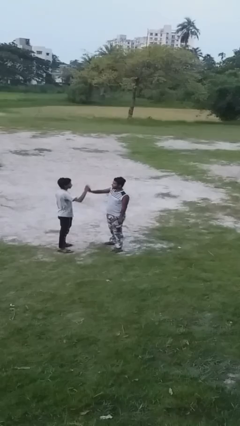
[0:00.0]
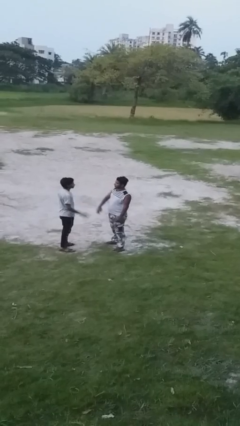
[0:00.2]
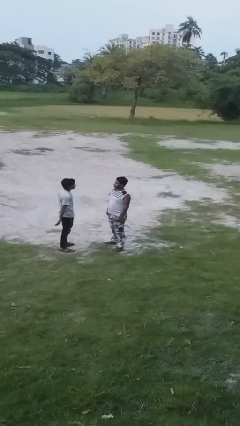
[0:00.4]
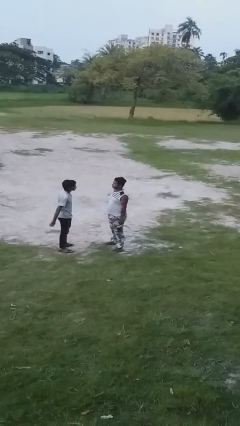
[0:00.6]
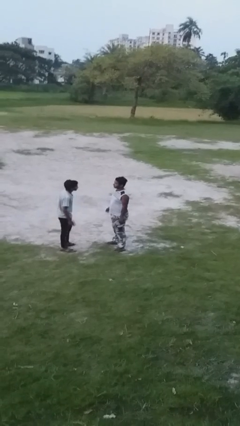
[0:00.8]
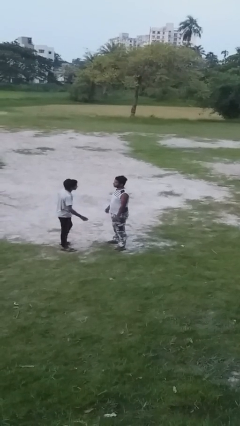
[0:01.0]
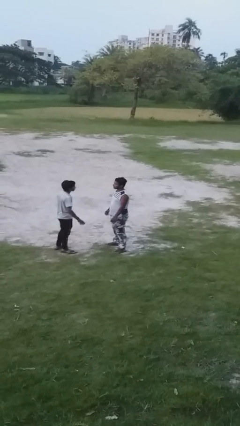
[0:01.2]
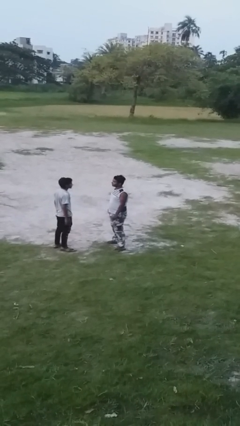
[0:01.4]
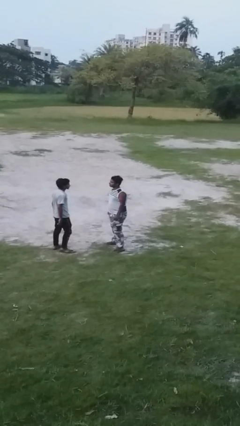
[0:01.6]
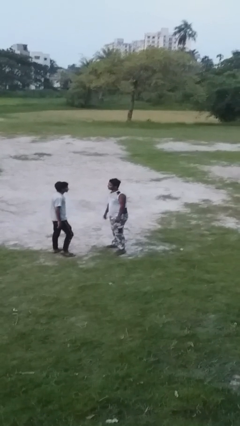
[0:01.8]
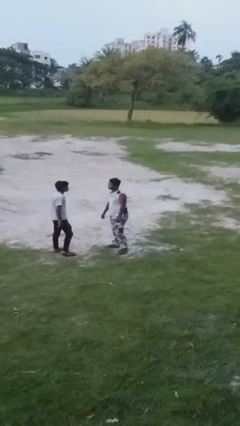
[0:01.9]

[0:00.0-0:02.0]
person highfives hand

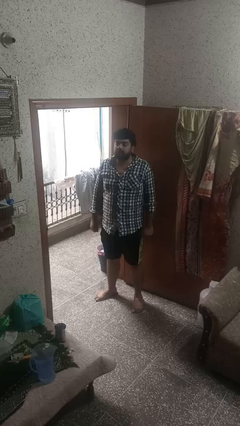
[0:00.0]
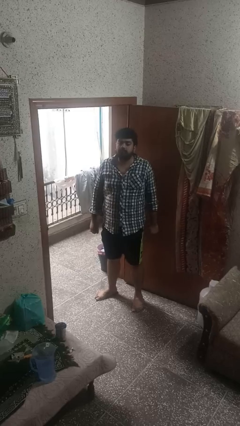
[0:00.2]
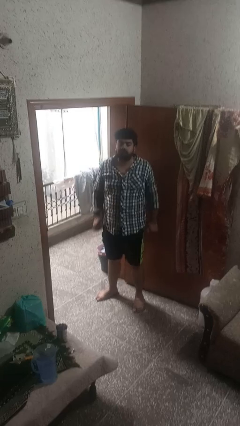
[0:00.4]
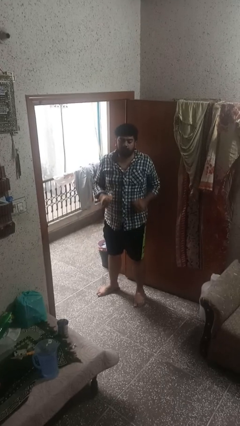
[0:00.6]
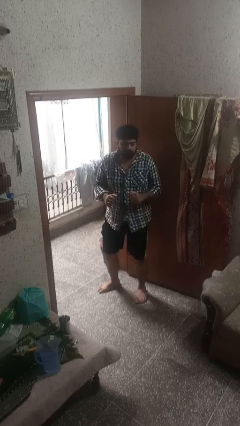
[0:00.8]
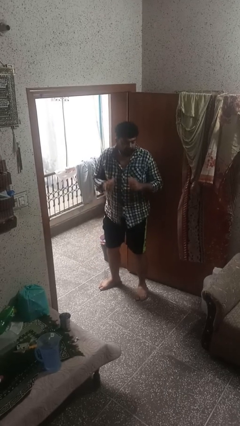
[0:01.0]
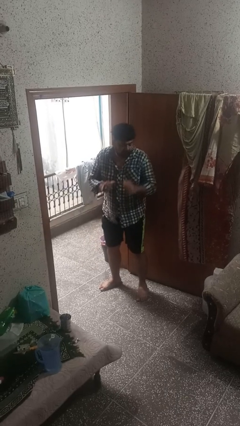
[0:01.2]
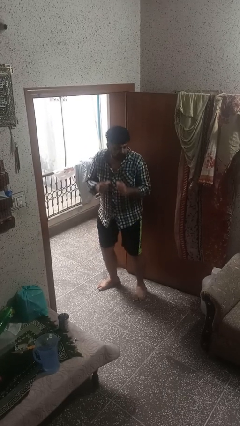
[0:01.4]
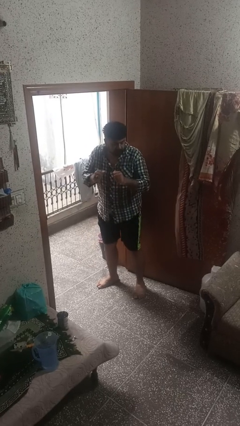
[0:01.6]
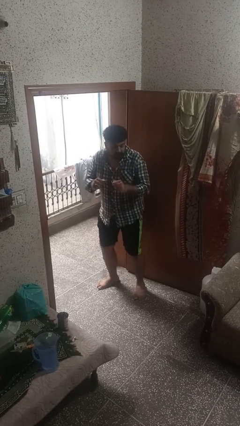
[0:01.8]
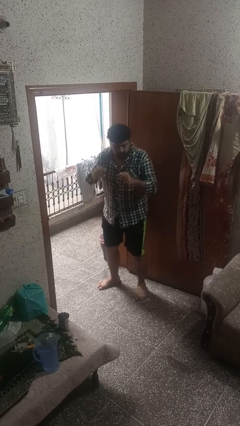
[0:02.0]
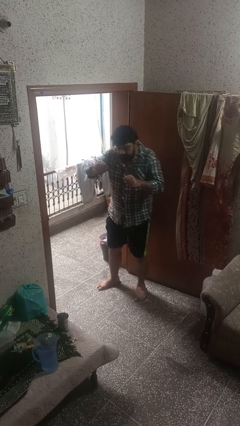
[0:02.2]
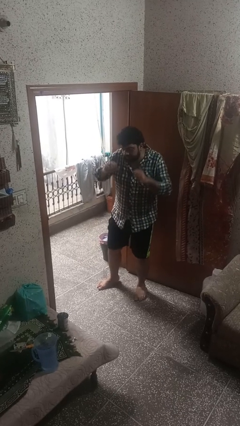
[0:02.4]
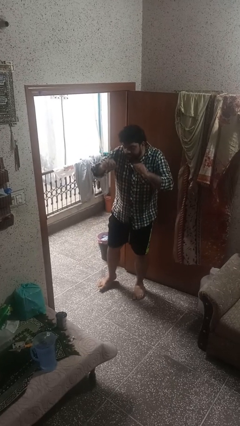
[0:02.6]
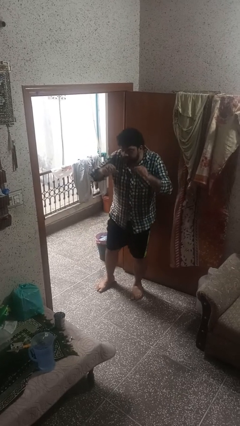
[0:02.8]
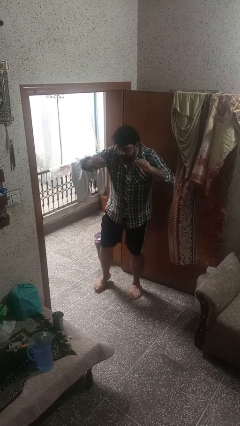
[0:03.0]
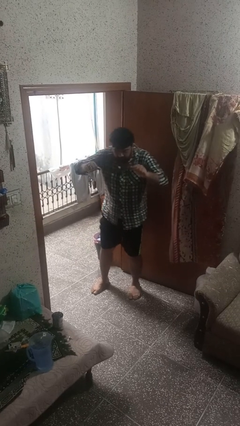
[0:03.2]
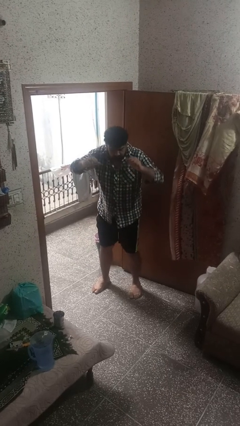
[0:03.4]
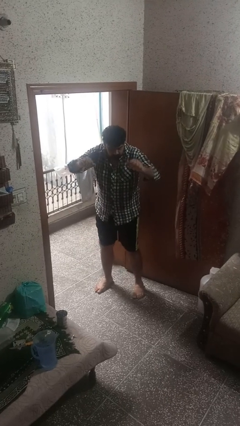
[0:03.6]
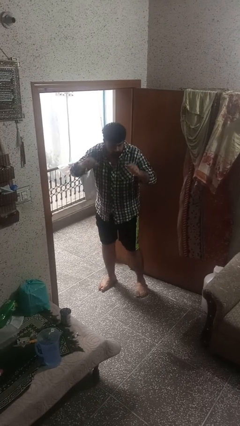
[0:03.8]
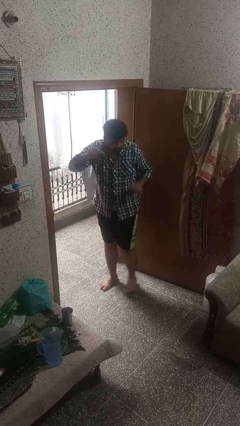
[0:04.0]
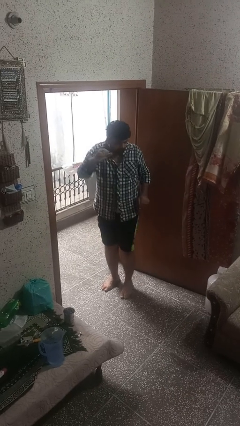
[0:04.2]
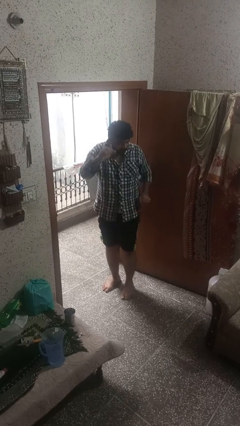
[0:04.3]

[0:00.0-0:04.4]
person dances in place

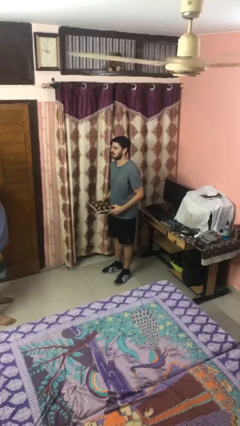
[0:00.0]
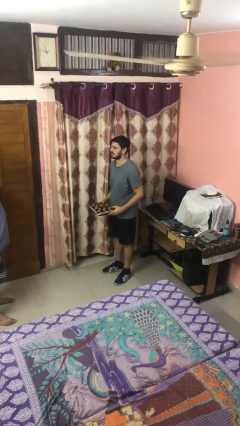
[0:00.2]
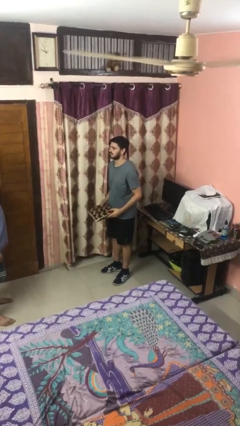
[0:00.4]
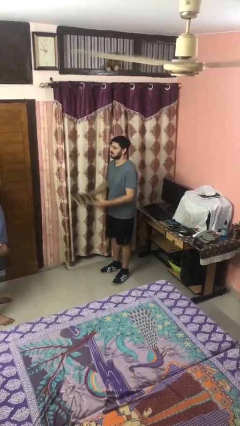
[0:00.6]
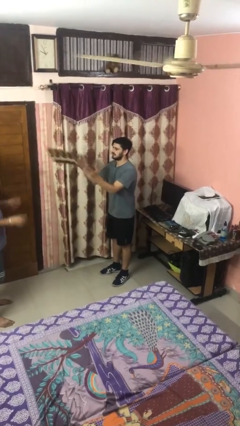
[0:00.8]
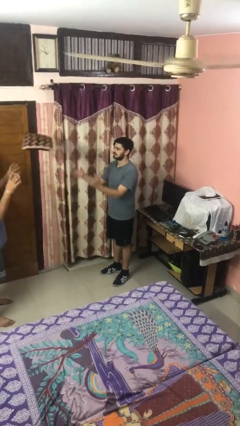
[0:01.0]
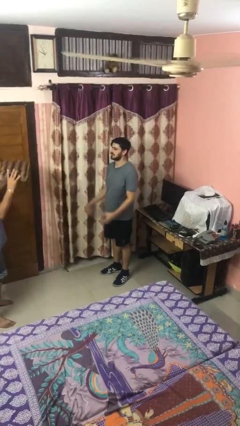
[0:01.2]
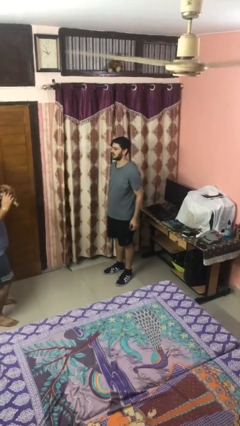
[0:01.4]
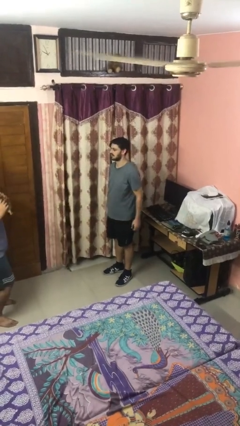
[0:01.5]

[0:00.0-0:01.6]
person throws object to person

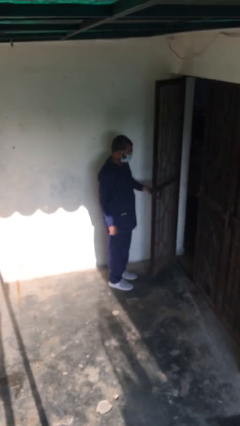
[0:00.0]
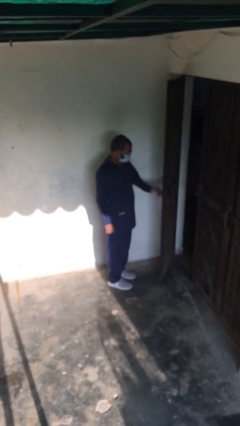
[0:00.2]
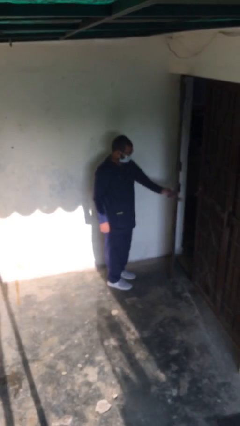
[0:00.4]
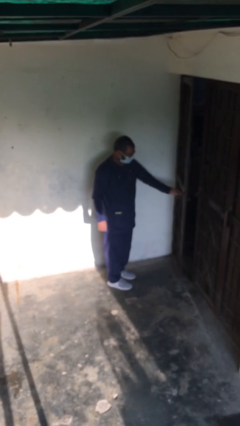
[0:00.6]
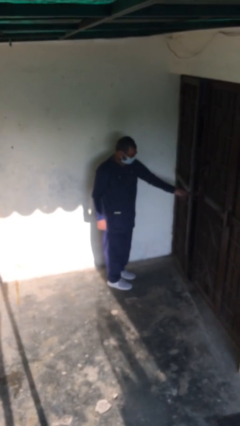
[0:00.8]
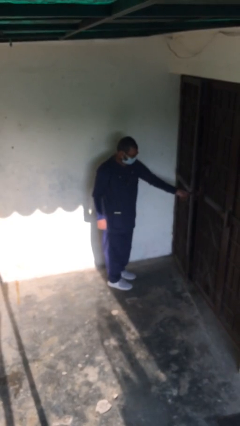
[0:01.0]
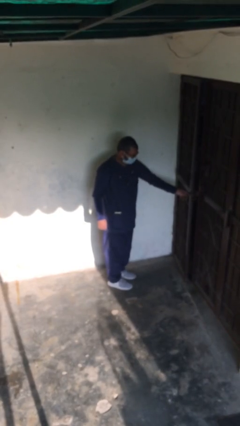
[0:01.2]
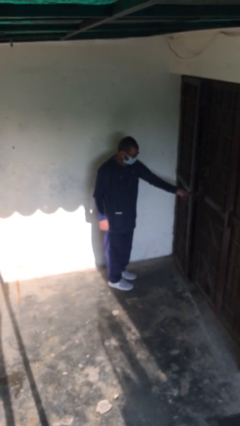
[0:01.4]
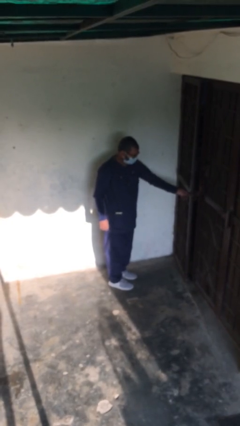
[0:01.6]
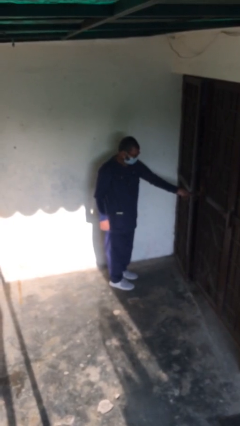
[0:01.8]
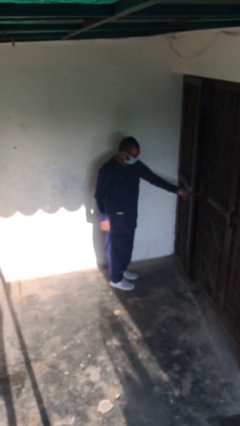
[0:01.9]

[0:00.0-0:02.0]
person closes facility door

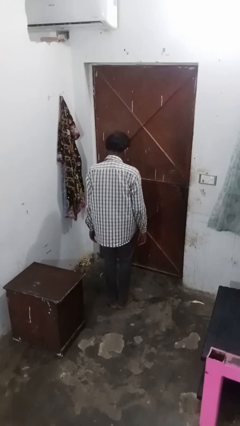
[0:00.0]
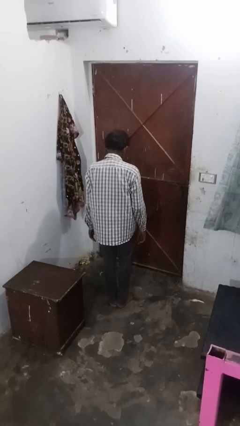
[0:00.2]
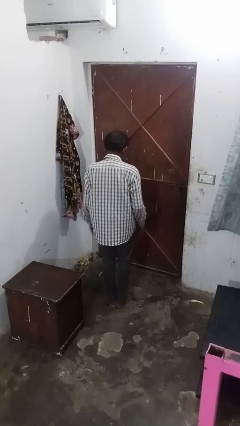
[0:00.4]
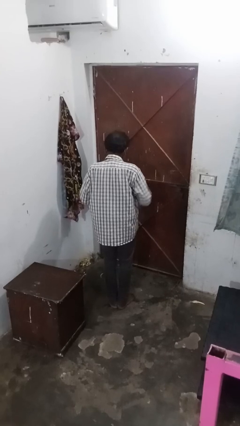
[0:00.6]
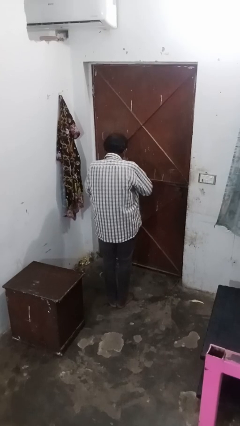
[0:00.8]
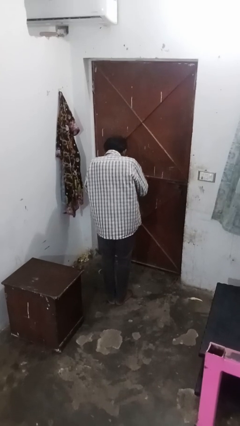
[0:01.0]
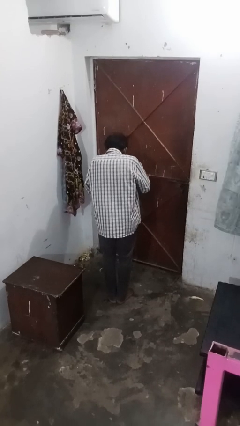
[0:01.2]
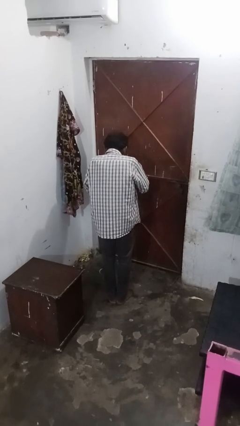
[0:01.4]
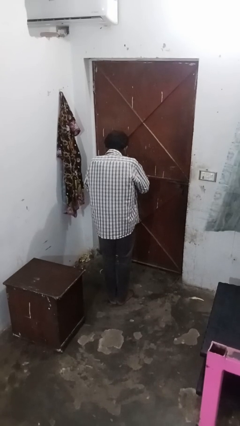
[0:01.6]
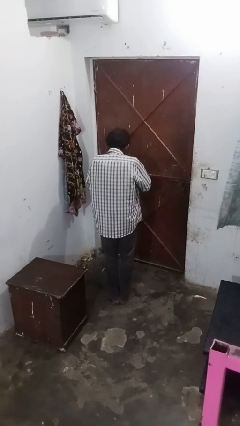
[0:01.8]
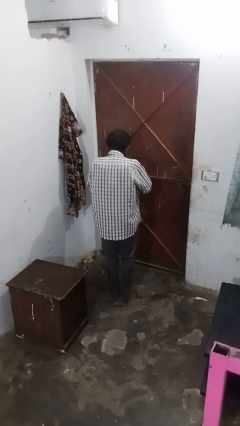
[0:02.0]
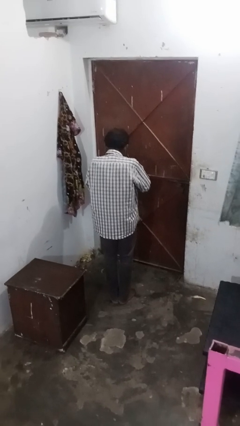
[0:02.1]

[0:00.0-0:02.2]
person blows nose

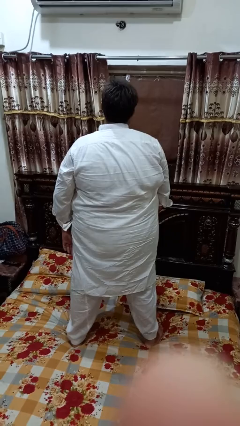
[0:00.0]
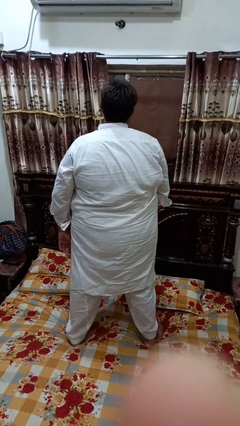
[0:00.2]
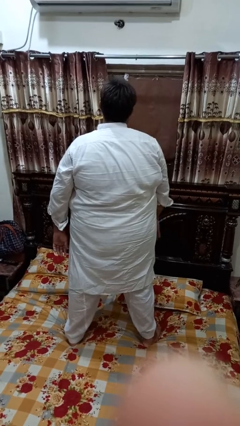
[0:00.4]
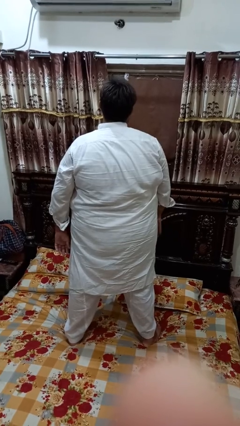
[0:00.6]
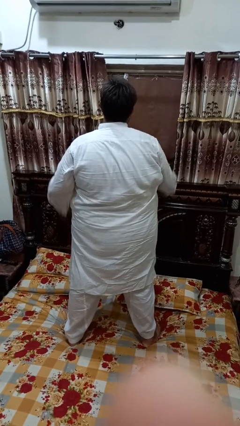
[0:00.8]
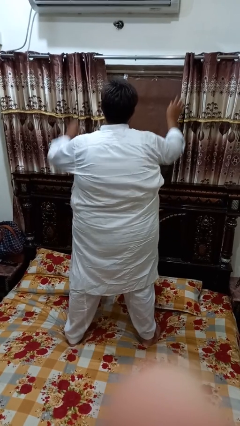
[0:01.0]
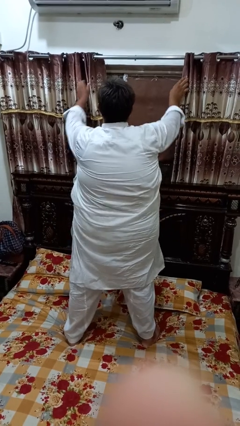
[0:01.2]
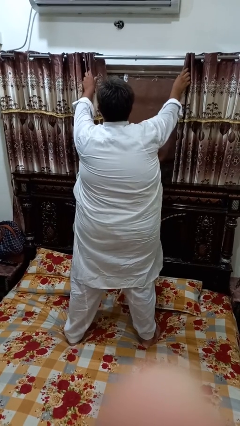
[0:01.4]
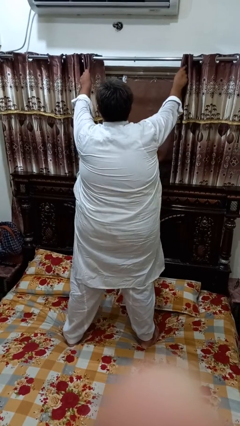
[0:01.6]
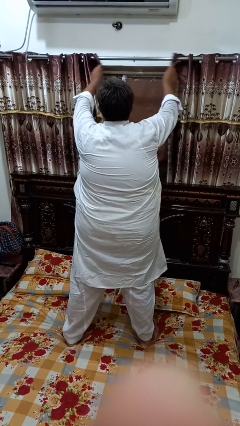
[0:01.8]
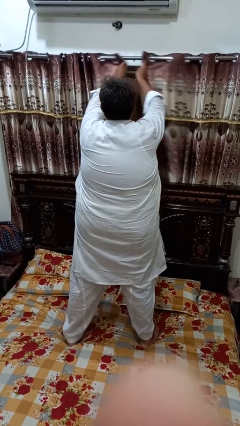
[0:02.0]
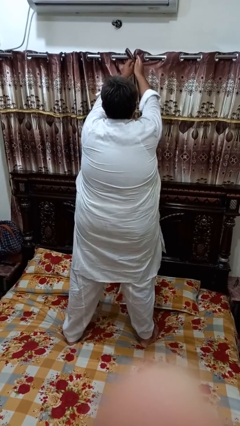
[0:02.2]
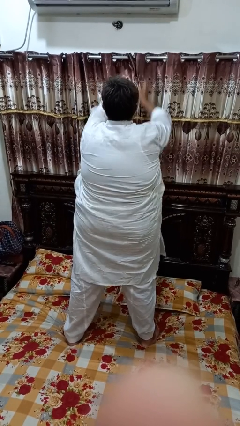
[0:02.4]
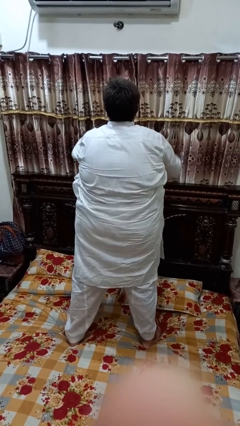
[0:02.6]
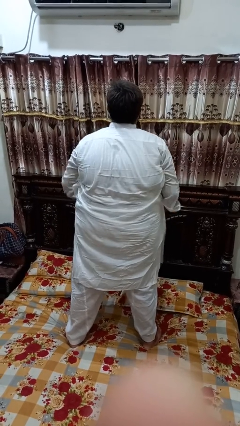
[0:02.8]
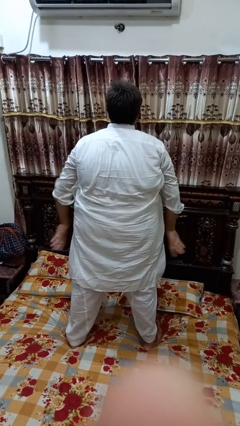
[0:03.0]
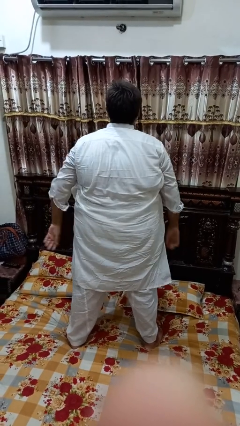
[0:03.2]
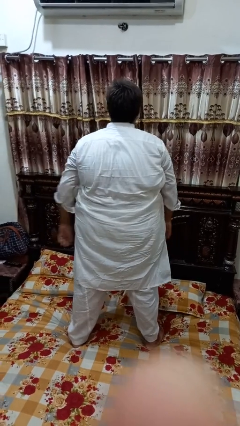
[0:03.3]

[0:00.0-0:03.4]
person closes curtains

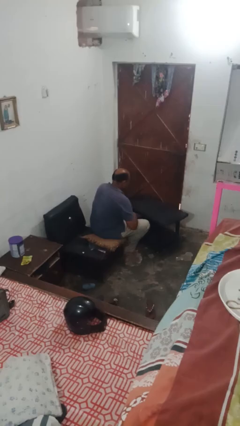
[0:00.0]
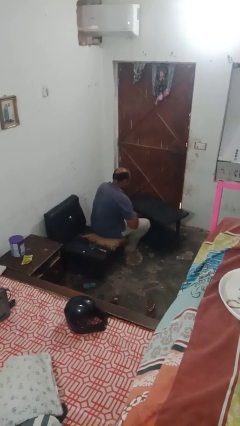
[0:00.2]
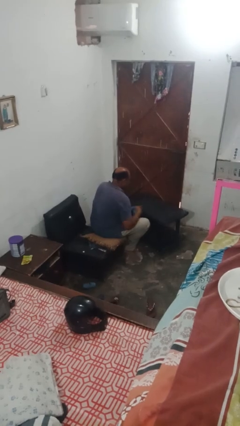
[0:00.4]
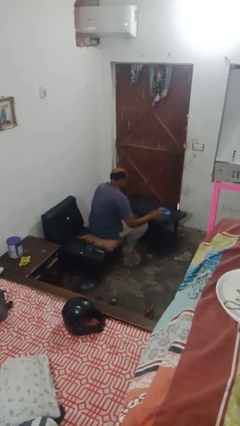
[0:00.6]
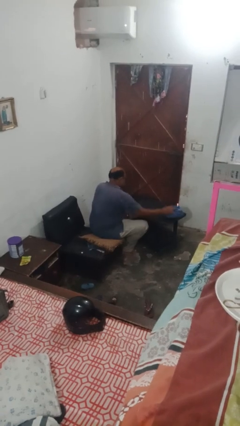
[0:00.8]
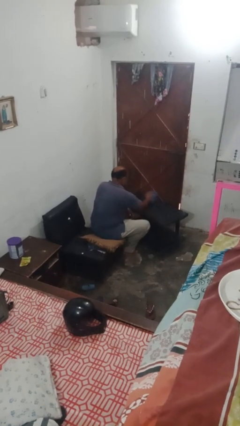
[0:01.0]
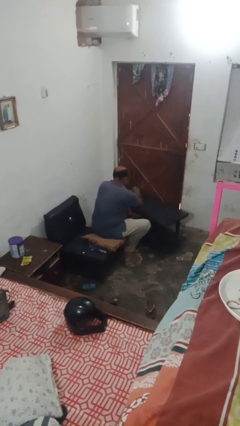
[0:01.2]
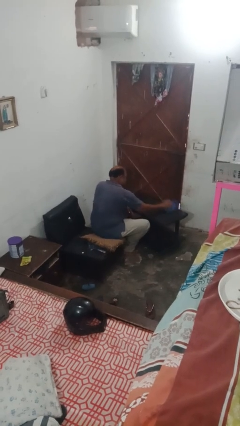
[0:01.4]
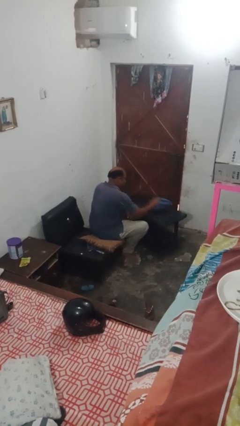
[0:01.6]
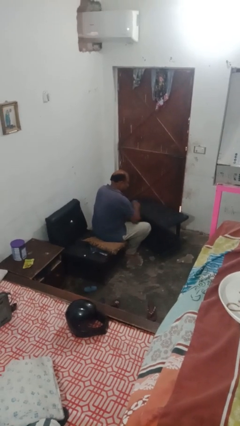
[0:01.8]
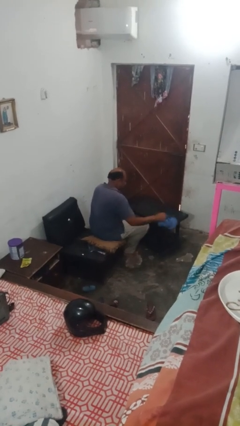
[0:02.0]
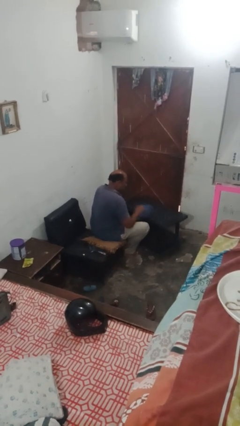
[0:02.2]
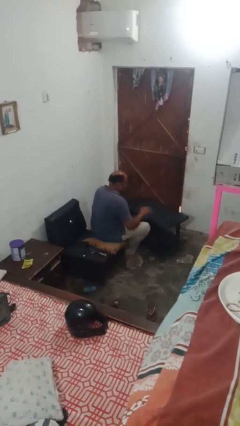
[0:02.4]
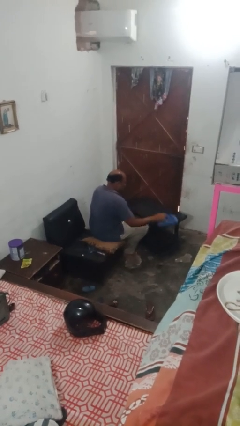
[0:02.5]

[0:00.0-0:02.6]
person cleans table with rag
